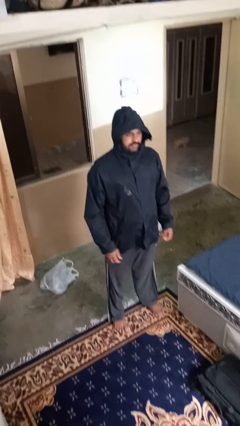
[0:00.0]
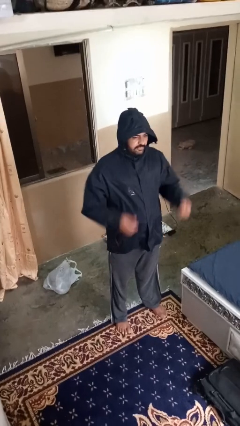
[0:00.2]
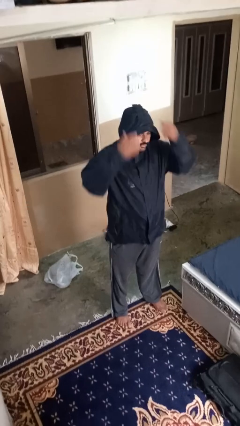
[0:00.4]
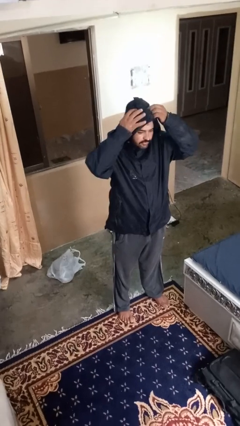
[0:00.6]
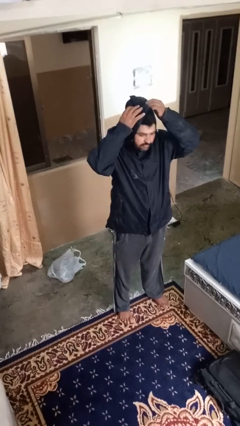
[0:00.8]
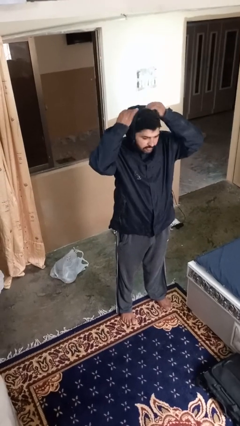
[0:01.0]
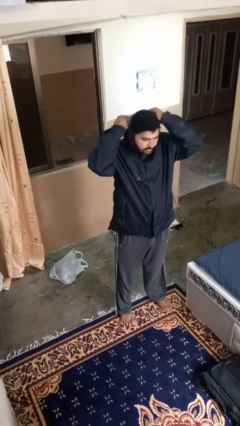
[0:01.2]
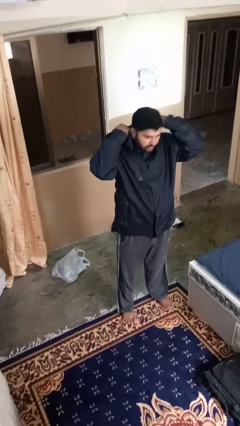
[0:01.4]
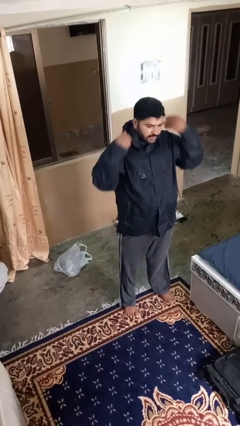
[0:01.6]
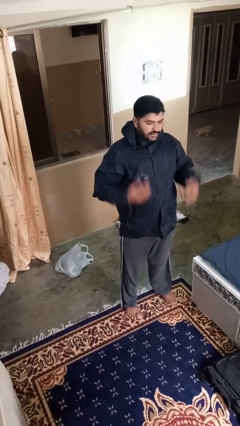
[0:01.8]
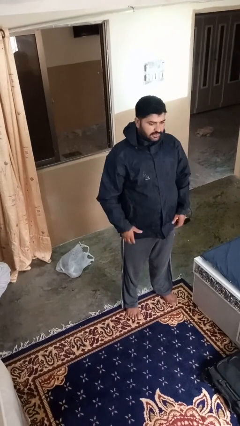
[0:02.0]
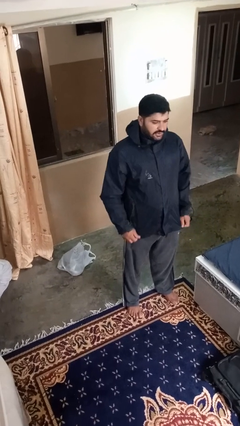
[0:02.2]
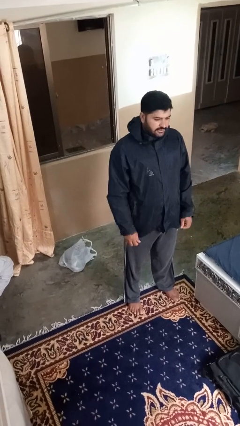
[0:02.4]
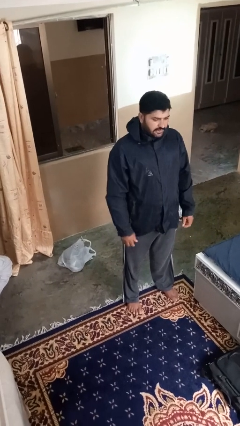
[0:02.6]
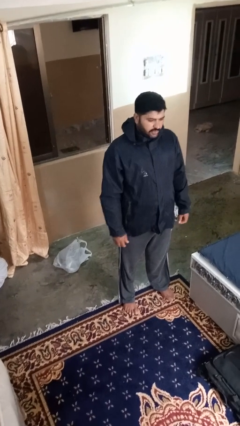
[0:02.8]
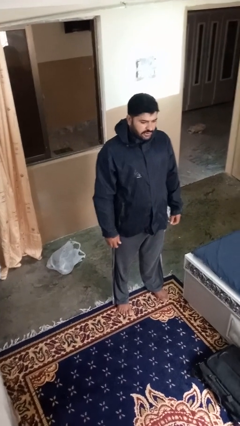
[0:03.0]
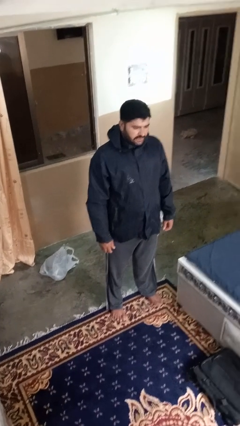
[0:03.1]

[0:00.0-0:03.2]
person takes off hoodie

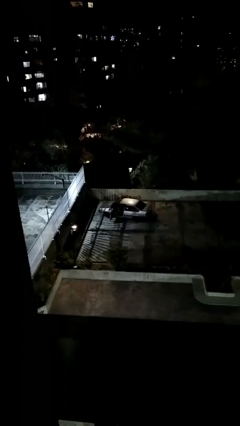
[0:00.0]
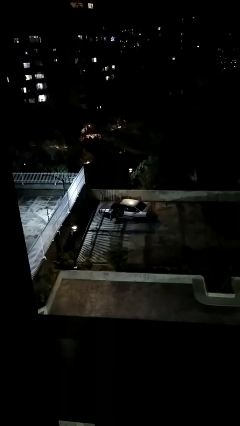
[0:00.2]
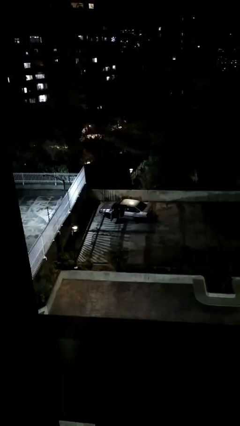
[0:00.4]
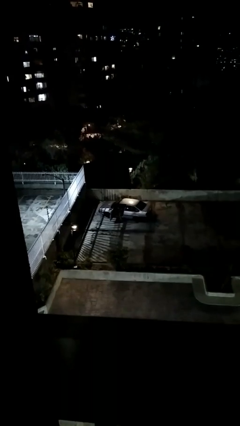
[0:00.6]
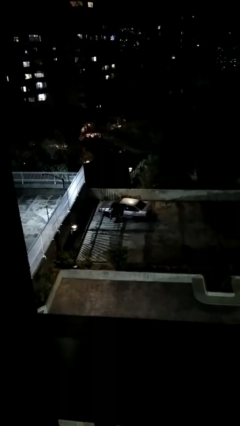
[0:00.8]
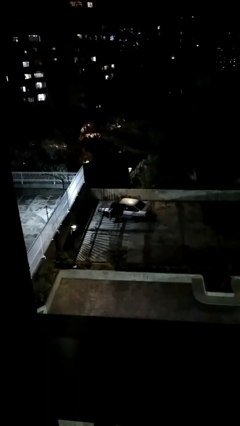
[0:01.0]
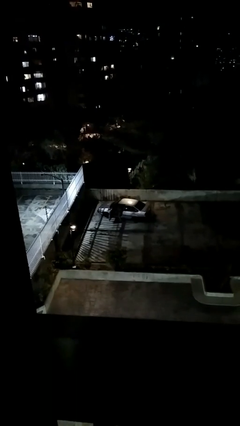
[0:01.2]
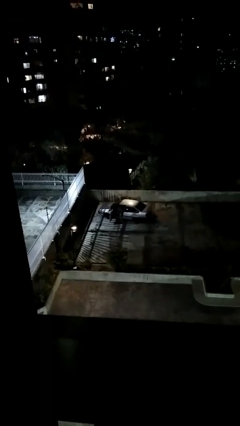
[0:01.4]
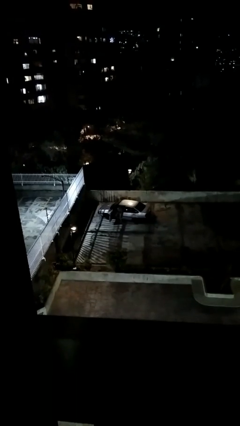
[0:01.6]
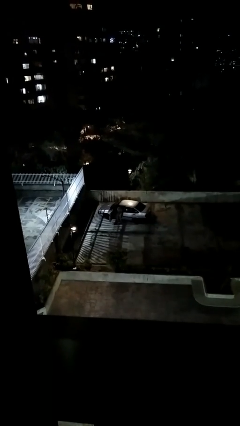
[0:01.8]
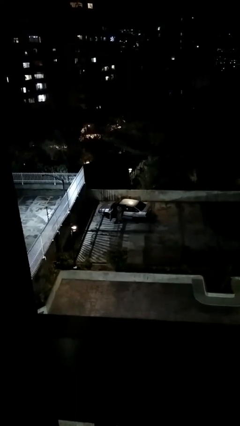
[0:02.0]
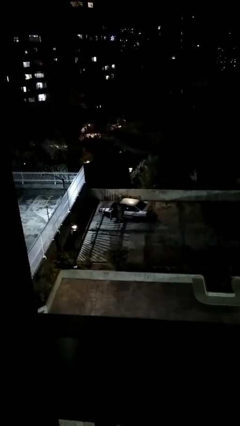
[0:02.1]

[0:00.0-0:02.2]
person exits car

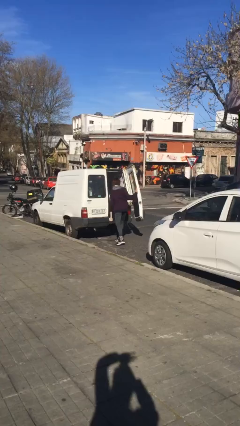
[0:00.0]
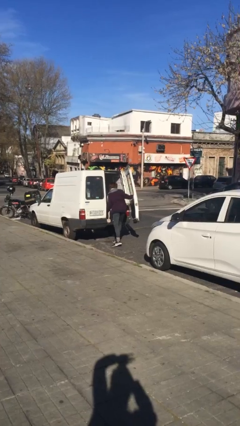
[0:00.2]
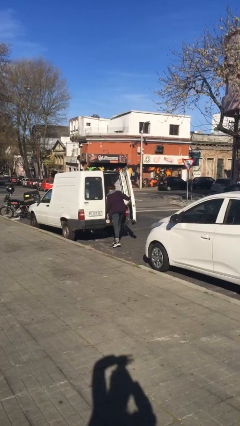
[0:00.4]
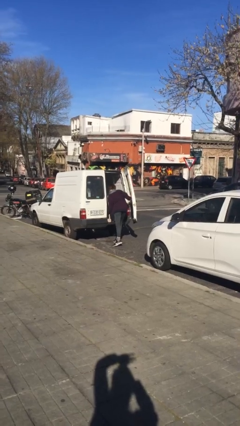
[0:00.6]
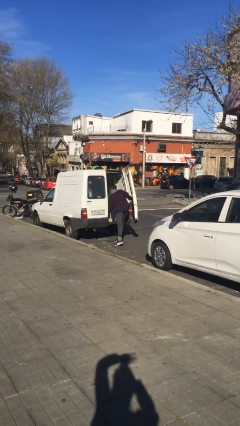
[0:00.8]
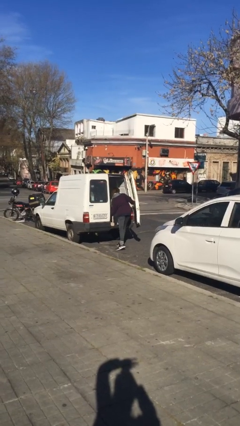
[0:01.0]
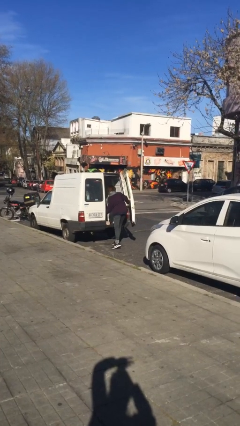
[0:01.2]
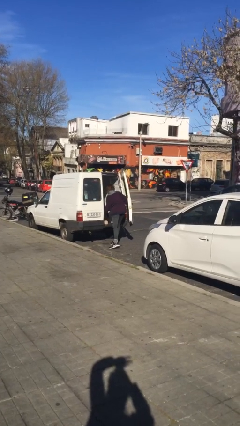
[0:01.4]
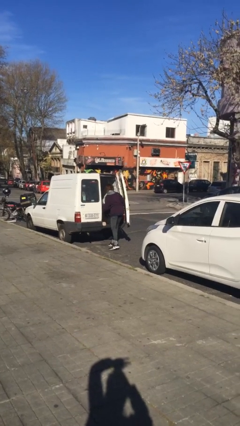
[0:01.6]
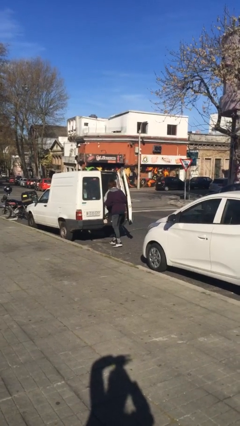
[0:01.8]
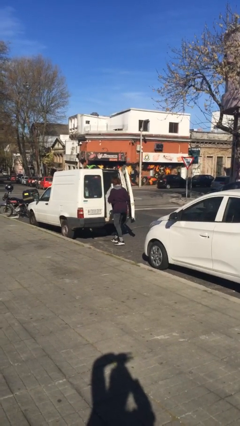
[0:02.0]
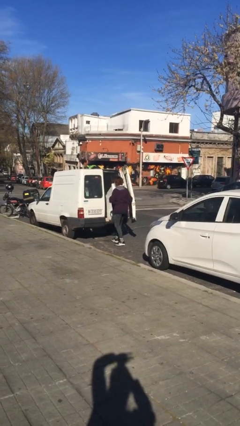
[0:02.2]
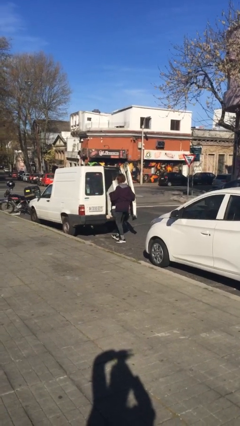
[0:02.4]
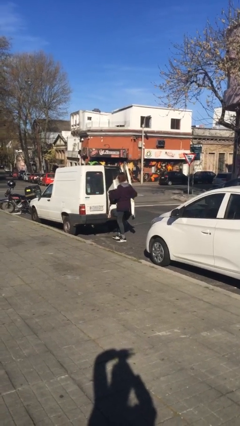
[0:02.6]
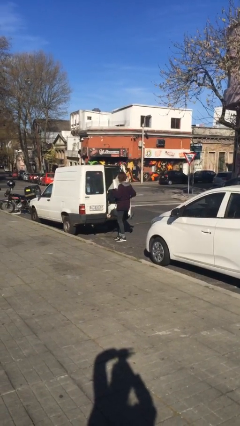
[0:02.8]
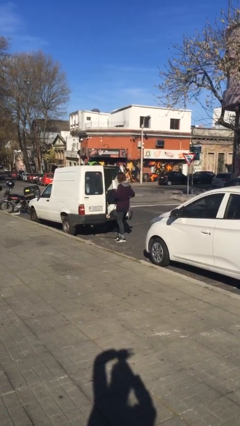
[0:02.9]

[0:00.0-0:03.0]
person unloads car

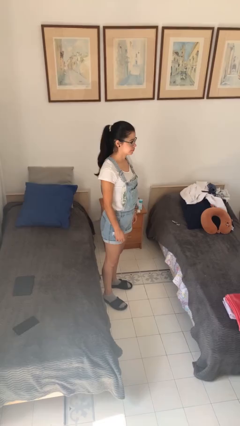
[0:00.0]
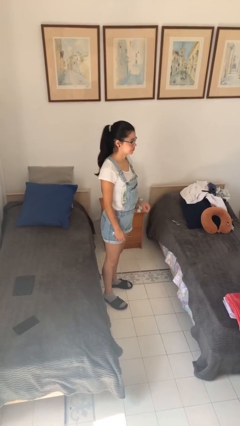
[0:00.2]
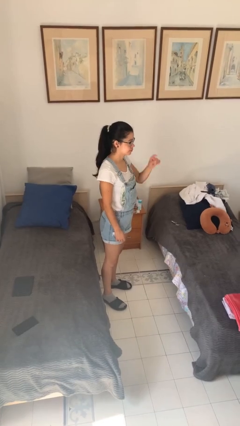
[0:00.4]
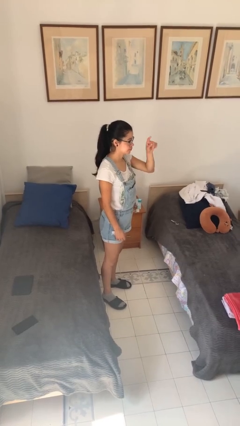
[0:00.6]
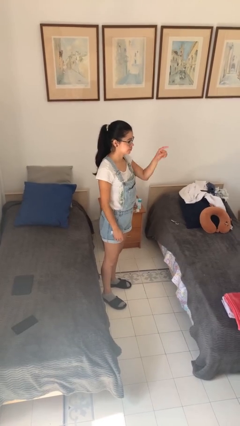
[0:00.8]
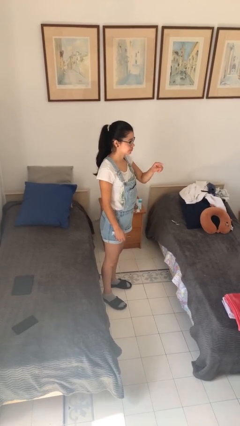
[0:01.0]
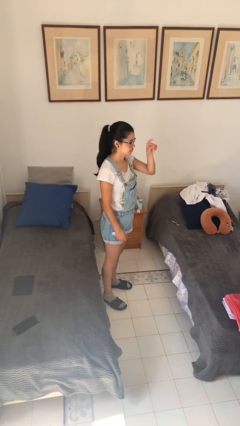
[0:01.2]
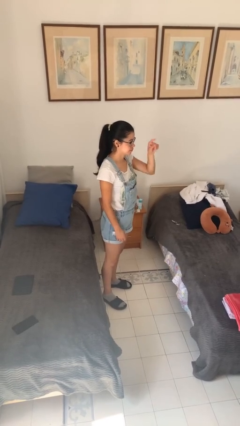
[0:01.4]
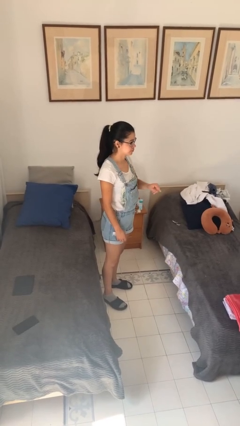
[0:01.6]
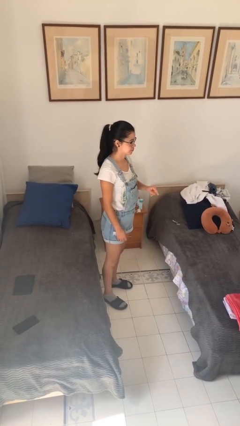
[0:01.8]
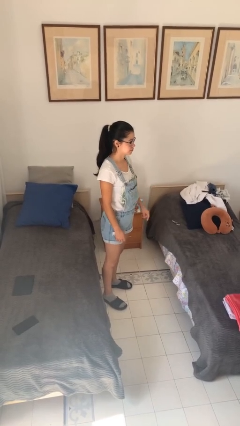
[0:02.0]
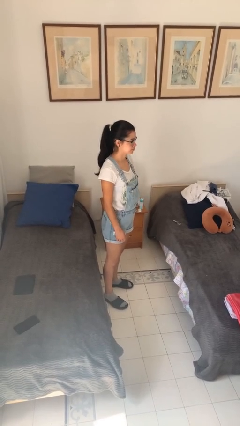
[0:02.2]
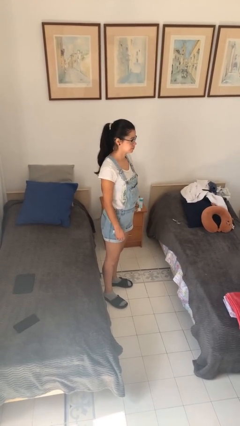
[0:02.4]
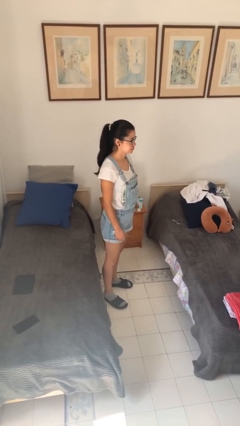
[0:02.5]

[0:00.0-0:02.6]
person gestures number four

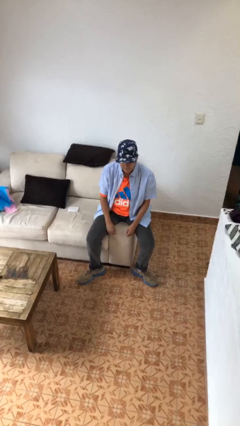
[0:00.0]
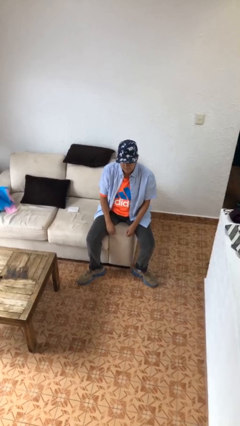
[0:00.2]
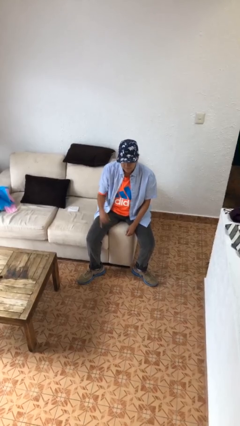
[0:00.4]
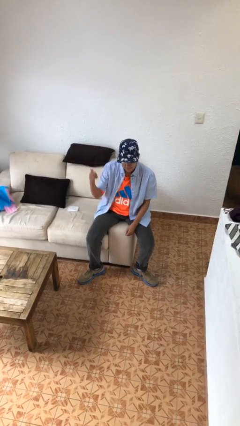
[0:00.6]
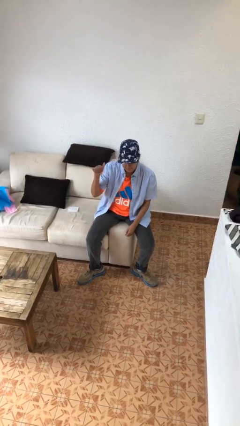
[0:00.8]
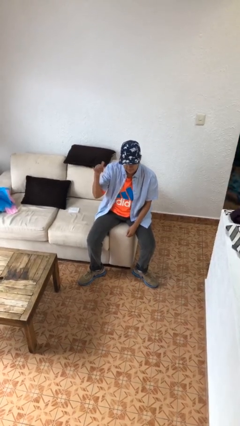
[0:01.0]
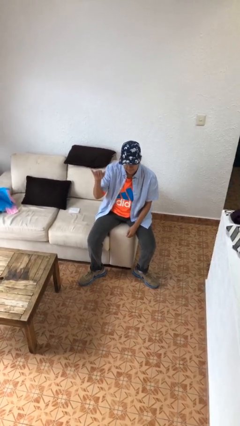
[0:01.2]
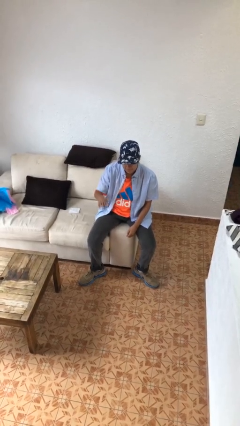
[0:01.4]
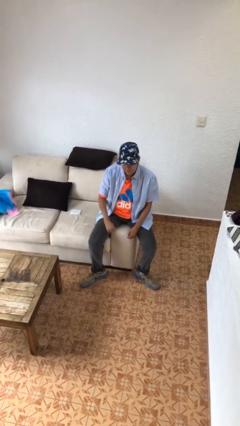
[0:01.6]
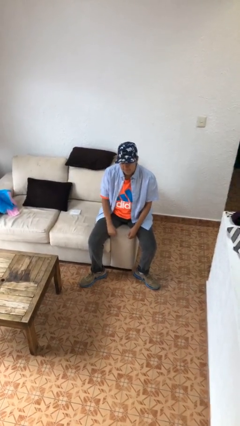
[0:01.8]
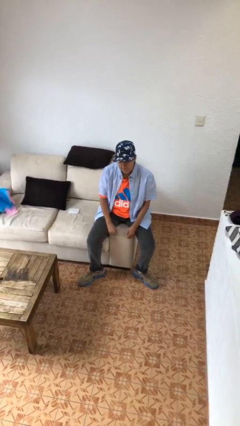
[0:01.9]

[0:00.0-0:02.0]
person gestures hang loose

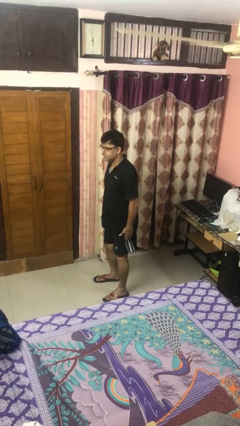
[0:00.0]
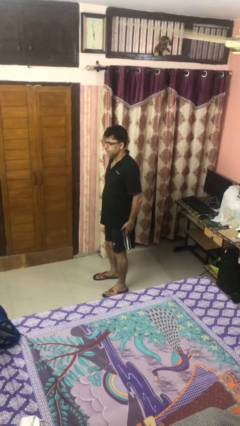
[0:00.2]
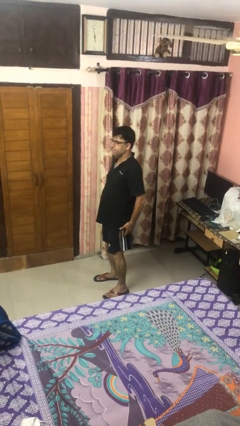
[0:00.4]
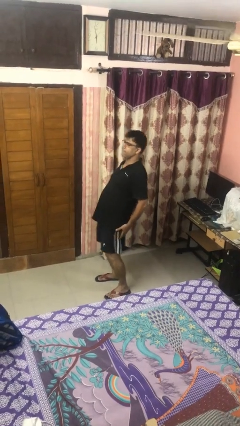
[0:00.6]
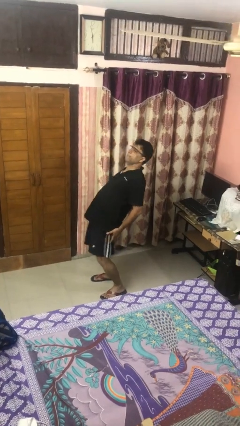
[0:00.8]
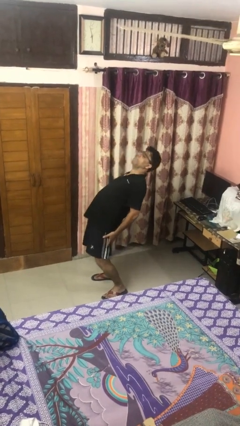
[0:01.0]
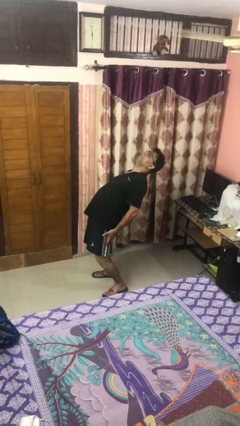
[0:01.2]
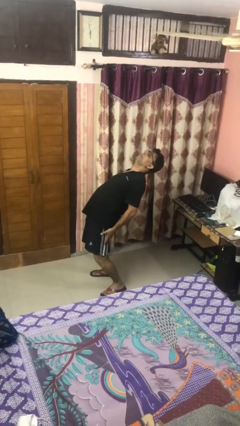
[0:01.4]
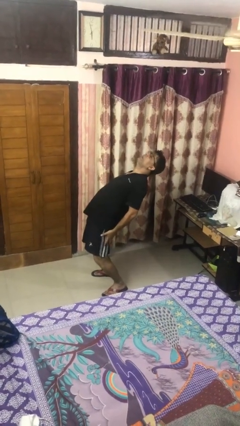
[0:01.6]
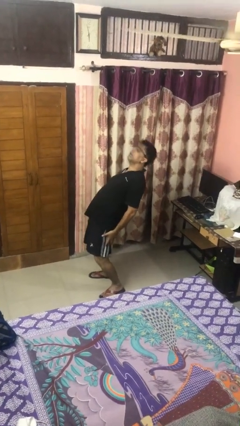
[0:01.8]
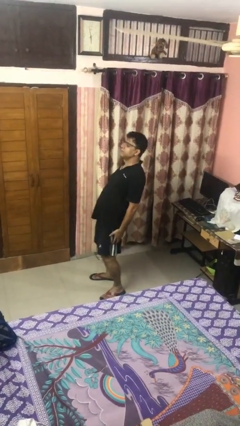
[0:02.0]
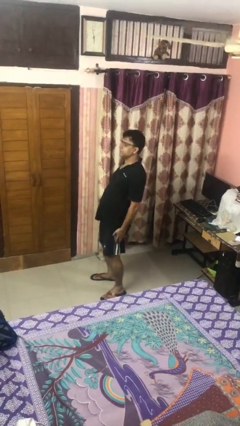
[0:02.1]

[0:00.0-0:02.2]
person stretches back

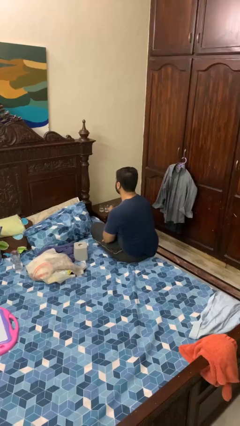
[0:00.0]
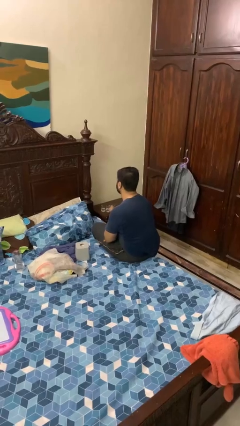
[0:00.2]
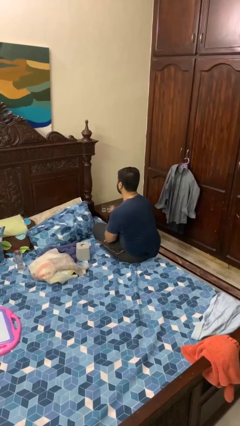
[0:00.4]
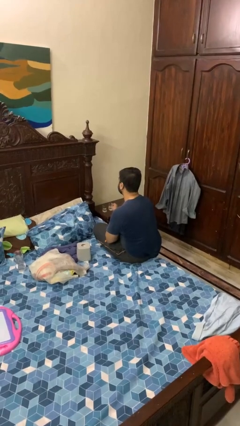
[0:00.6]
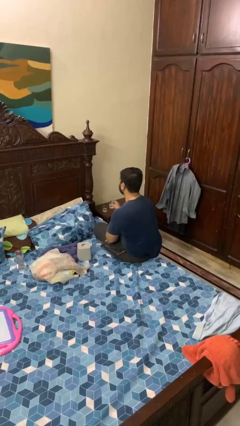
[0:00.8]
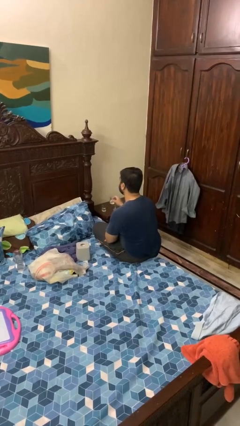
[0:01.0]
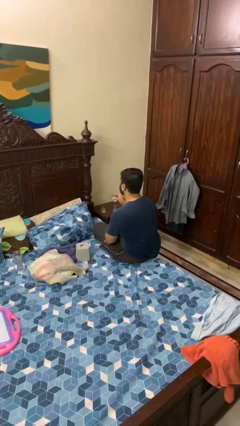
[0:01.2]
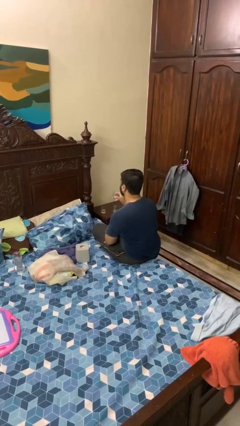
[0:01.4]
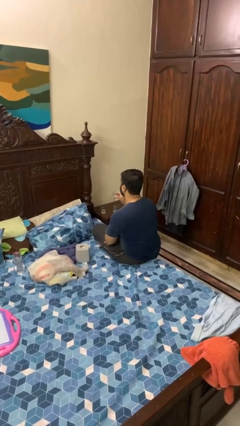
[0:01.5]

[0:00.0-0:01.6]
person picks up object from table

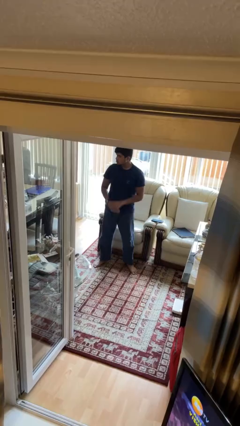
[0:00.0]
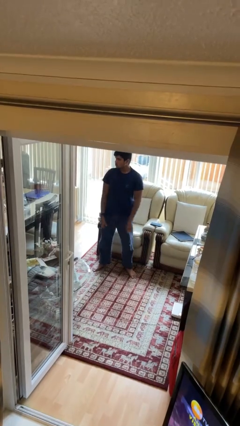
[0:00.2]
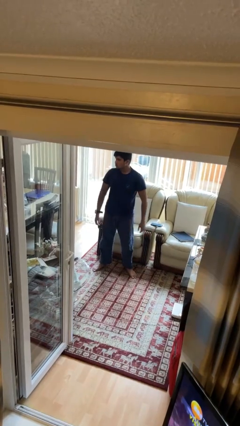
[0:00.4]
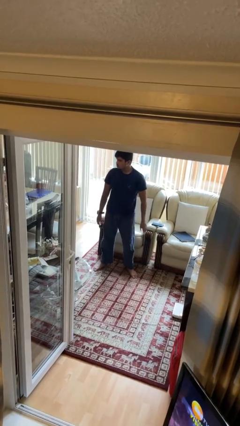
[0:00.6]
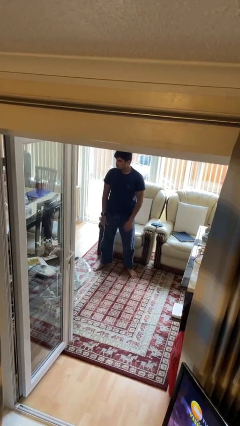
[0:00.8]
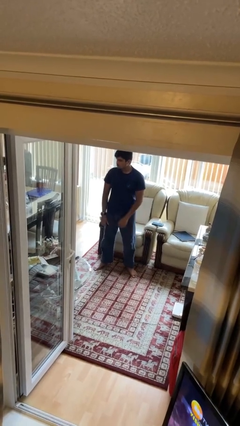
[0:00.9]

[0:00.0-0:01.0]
person stands up
